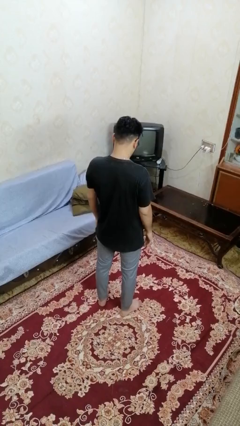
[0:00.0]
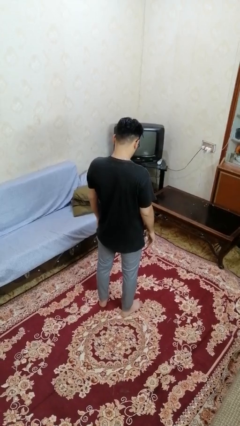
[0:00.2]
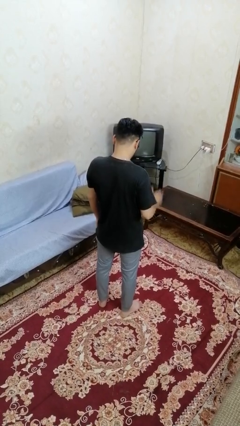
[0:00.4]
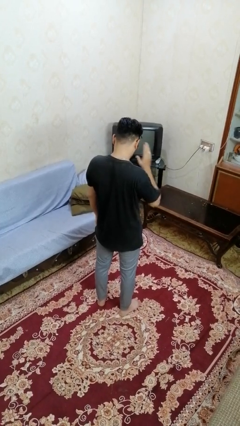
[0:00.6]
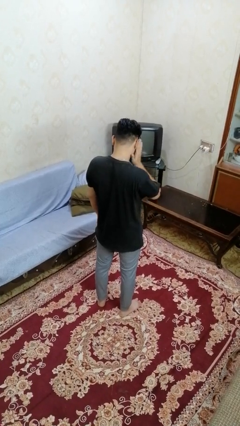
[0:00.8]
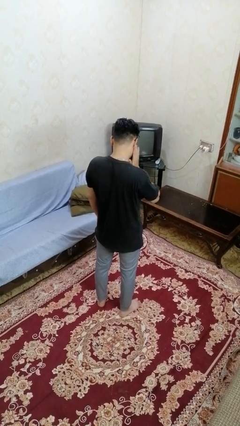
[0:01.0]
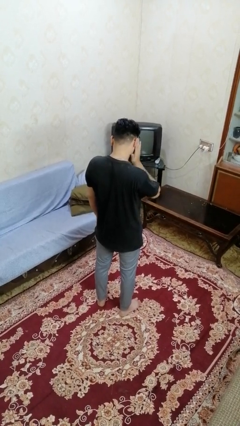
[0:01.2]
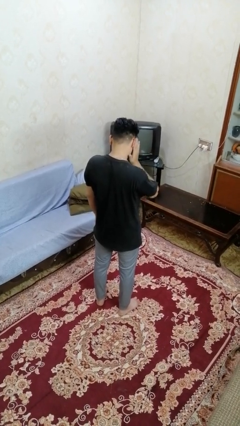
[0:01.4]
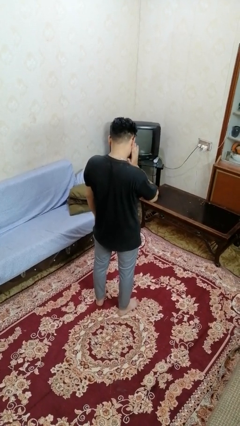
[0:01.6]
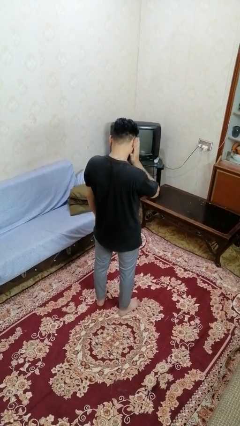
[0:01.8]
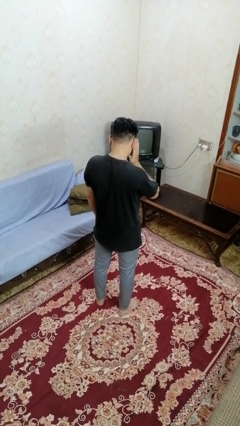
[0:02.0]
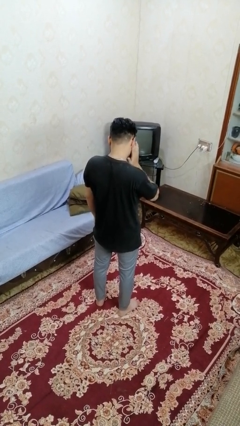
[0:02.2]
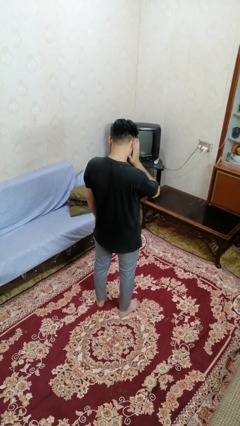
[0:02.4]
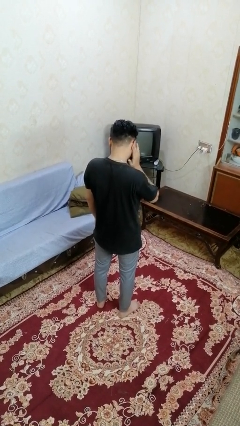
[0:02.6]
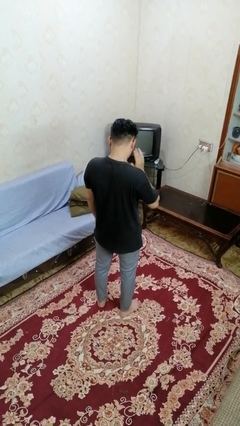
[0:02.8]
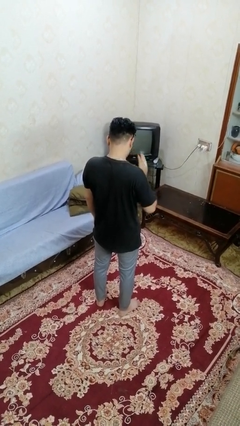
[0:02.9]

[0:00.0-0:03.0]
person touches earlobe

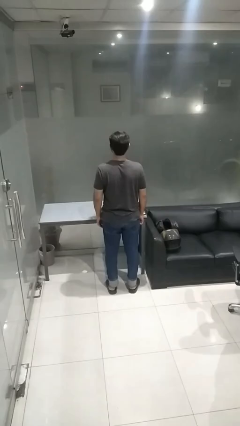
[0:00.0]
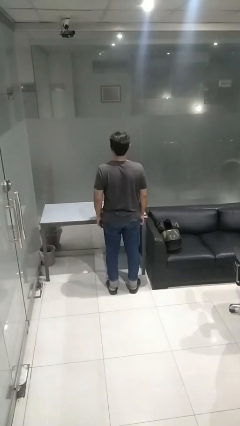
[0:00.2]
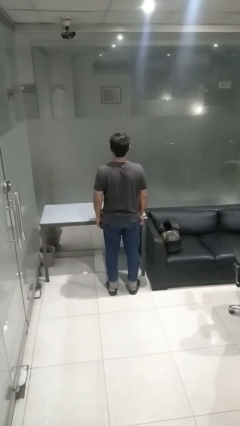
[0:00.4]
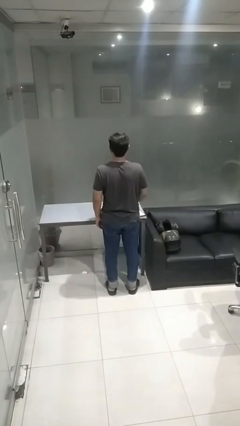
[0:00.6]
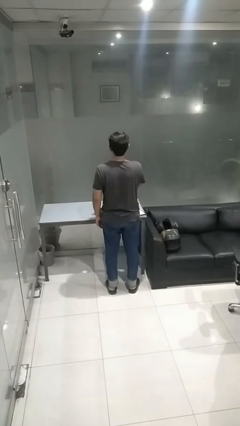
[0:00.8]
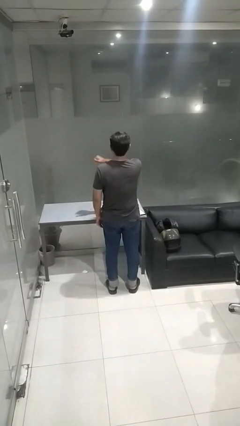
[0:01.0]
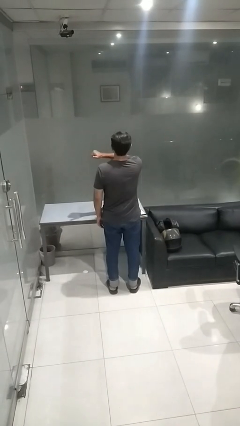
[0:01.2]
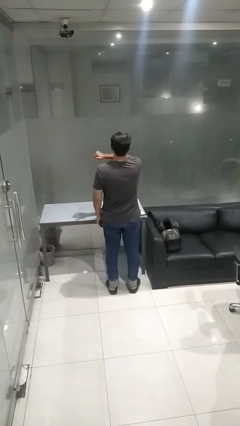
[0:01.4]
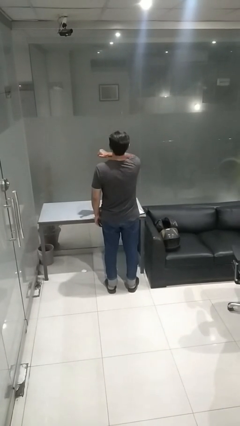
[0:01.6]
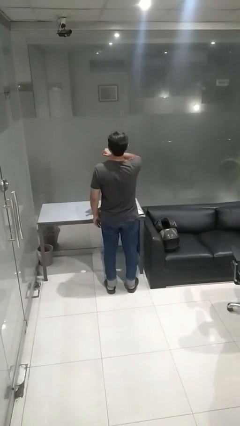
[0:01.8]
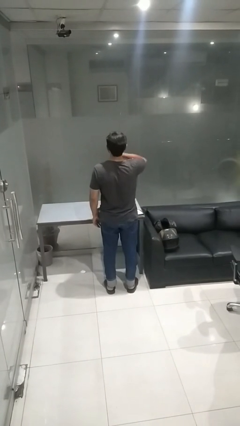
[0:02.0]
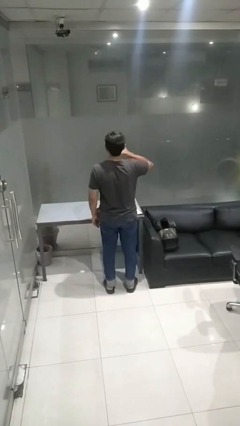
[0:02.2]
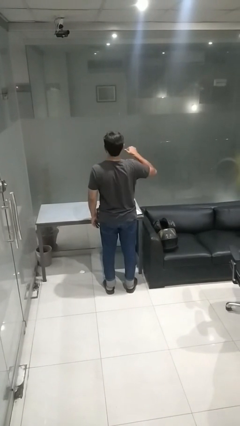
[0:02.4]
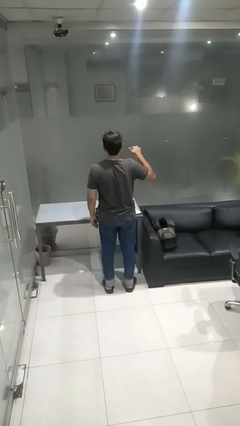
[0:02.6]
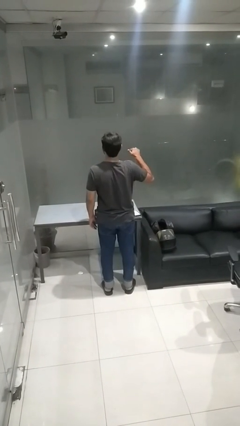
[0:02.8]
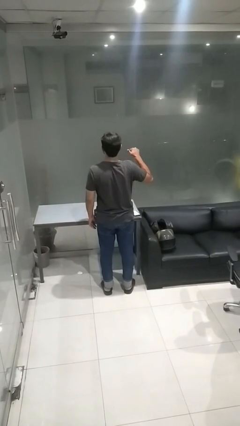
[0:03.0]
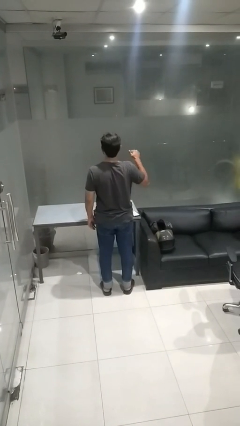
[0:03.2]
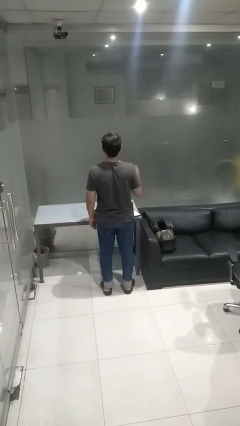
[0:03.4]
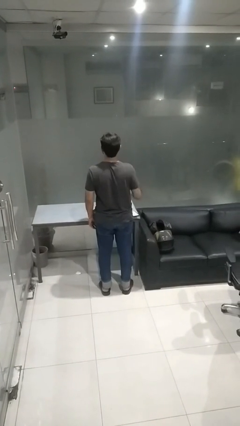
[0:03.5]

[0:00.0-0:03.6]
person gestures cut

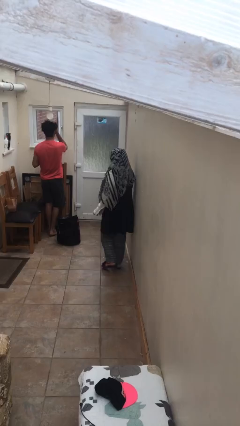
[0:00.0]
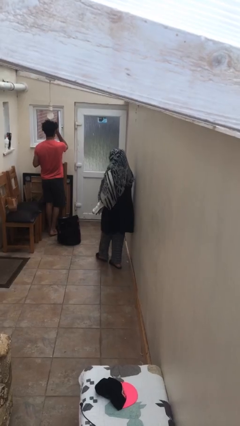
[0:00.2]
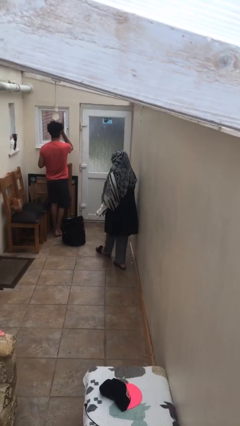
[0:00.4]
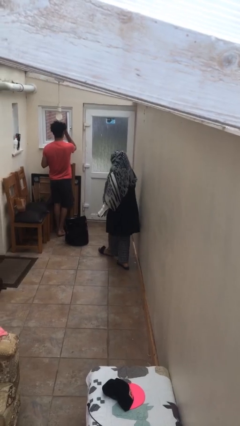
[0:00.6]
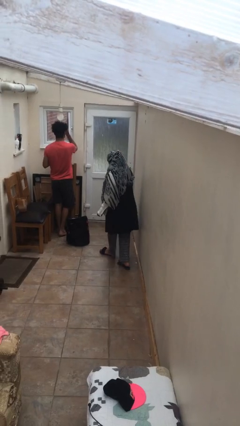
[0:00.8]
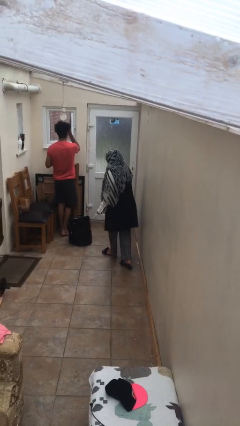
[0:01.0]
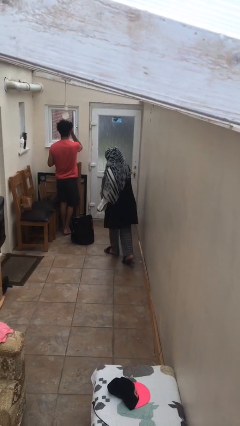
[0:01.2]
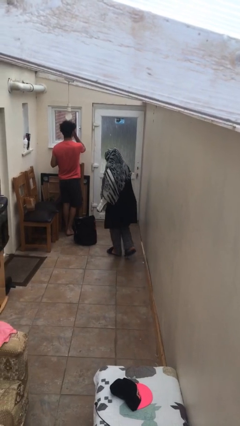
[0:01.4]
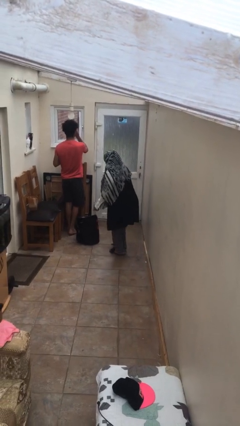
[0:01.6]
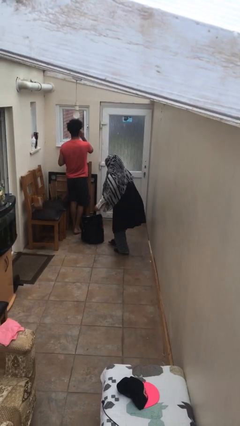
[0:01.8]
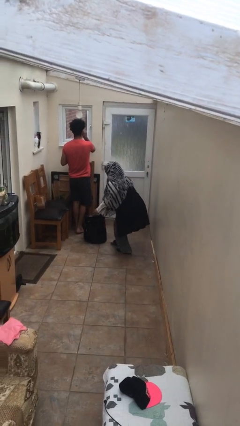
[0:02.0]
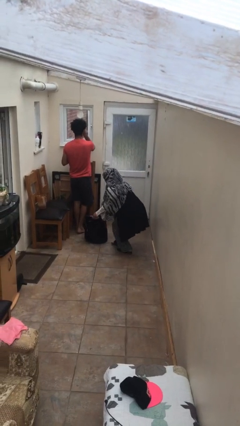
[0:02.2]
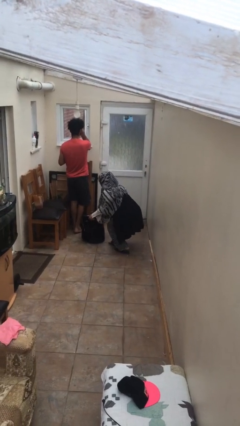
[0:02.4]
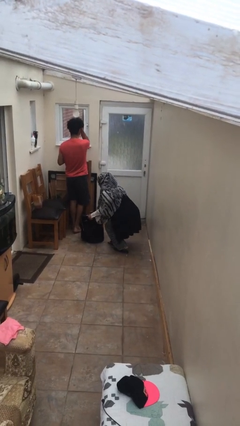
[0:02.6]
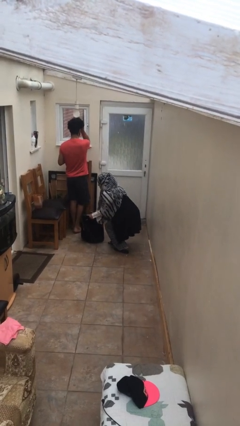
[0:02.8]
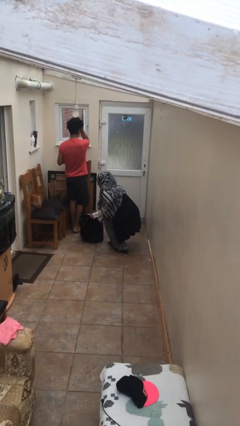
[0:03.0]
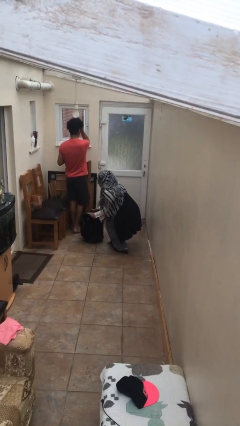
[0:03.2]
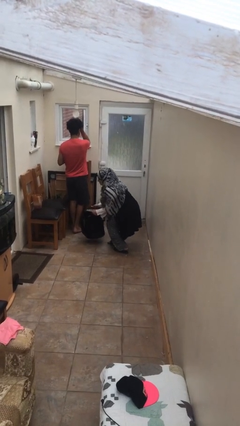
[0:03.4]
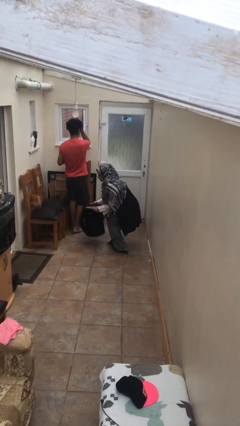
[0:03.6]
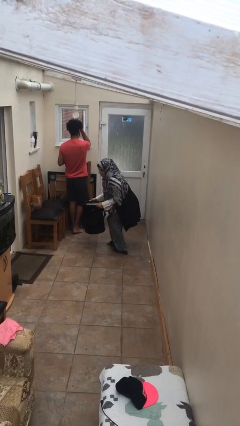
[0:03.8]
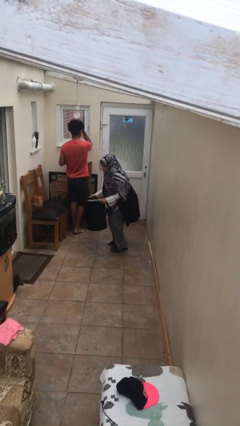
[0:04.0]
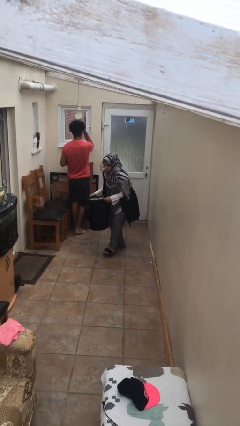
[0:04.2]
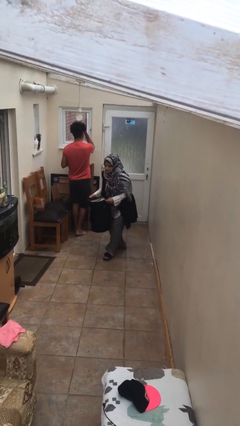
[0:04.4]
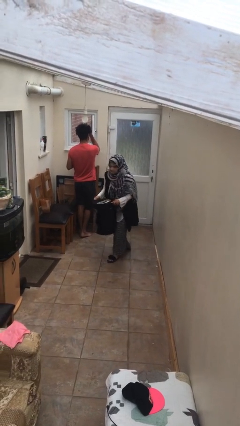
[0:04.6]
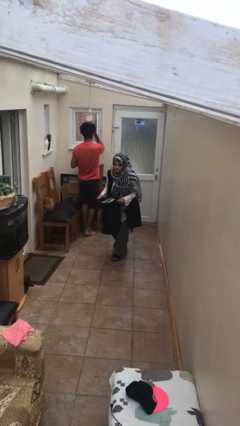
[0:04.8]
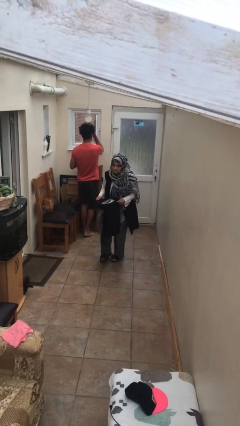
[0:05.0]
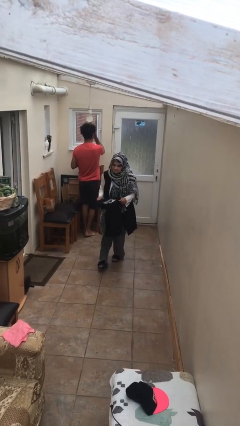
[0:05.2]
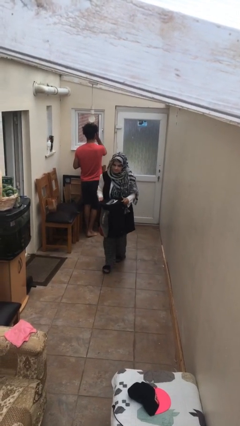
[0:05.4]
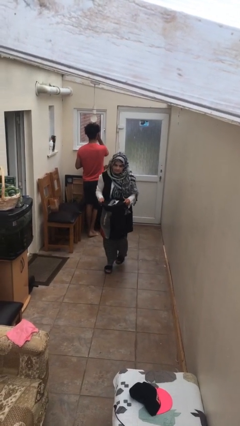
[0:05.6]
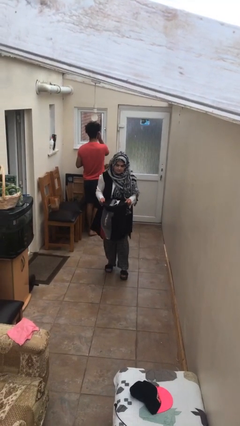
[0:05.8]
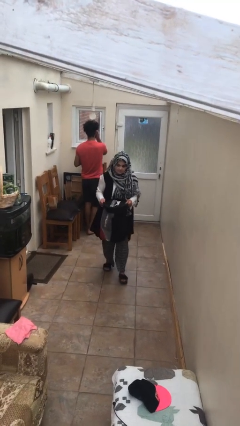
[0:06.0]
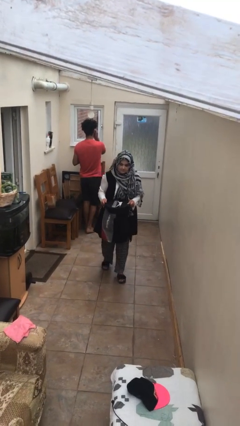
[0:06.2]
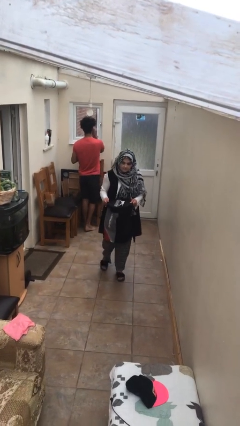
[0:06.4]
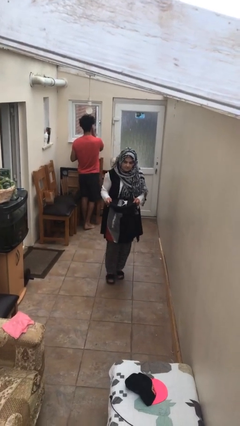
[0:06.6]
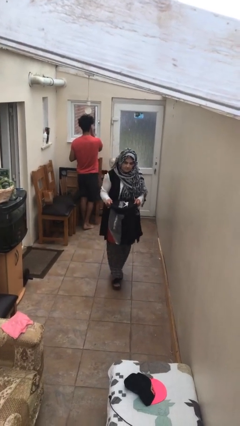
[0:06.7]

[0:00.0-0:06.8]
person steals object from person

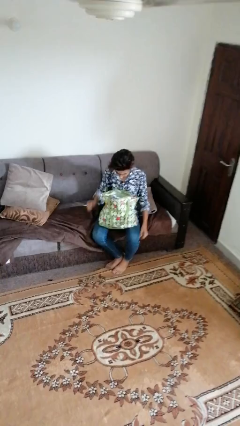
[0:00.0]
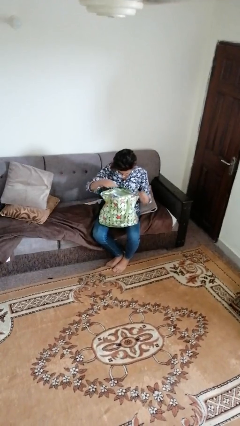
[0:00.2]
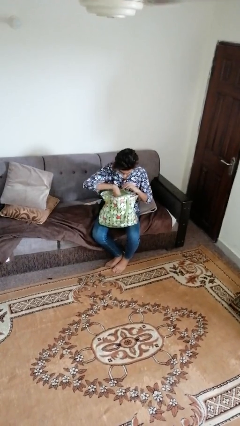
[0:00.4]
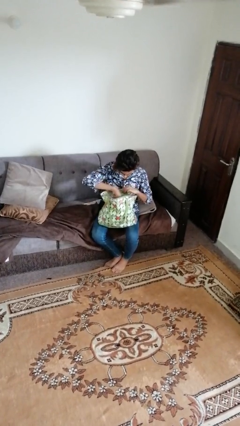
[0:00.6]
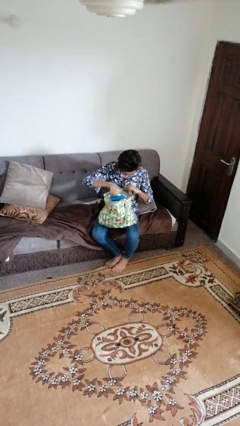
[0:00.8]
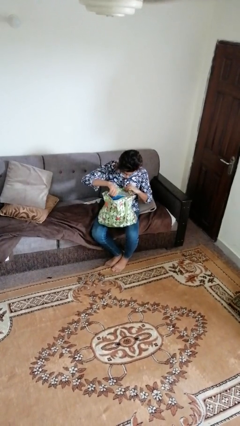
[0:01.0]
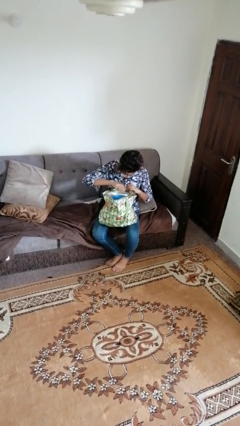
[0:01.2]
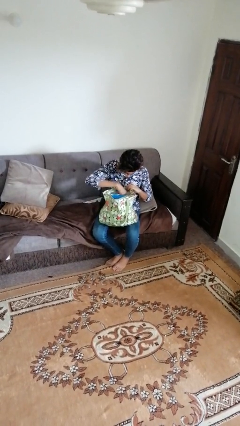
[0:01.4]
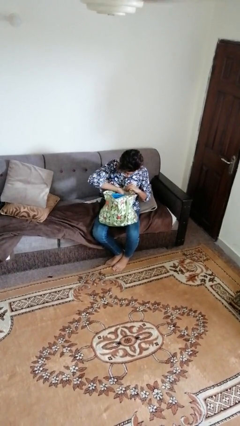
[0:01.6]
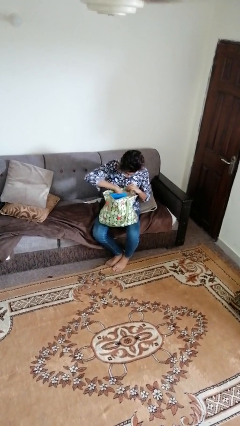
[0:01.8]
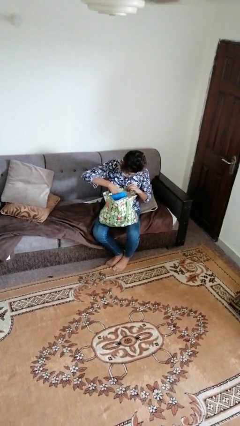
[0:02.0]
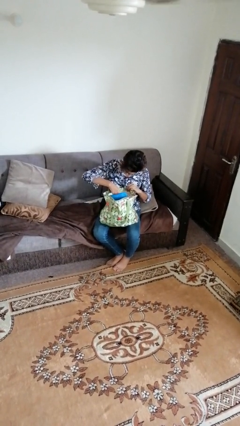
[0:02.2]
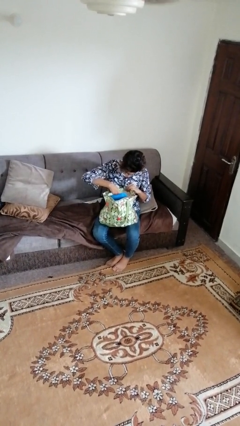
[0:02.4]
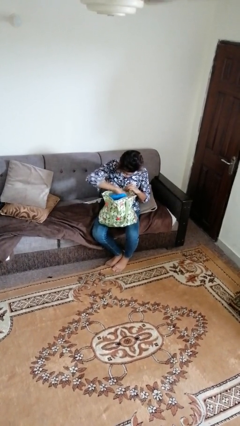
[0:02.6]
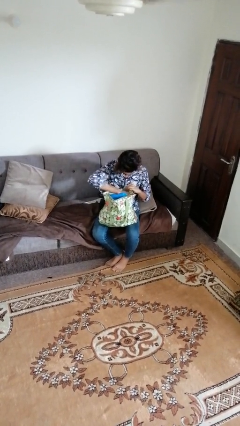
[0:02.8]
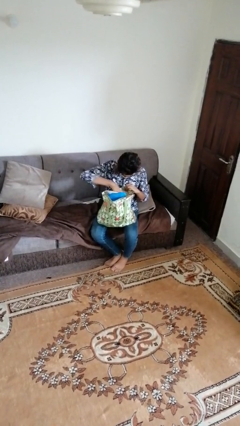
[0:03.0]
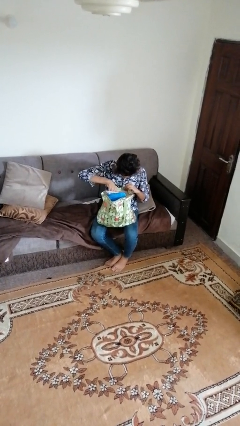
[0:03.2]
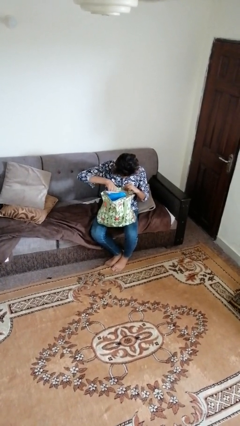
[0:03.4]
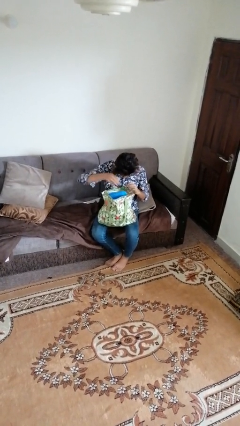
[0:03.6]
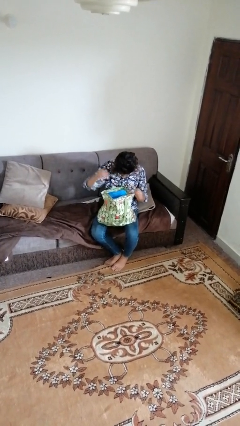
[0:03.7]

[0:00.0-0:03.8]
person searches in bag

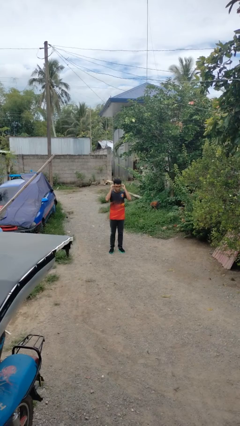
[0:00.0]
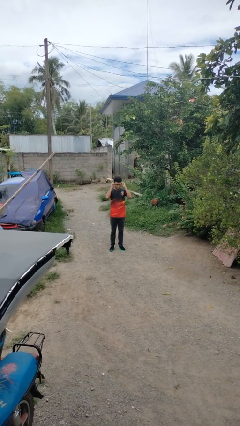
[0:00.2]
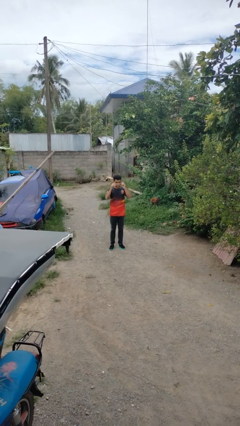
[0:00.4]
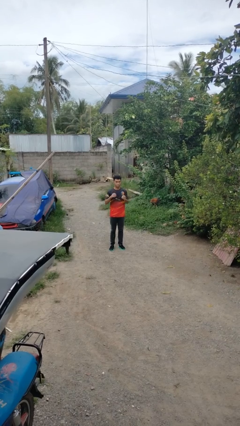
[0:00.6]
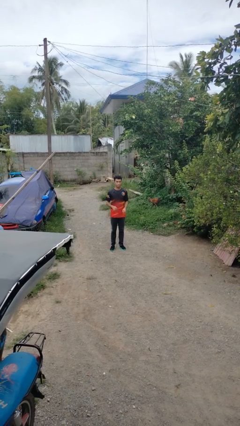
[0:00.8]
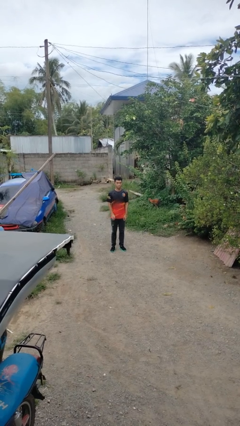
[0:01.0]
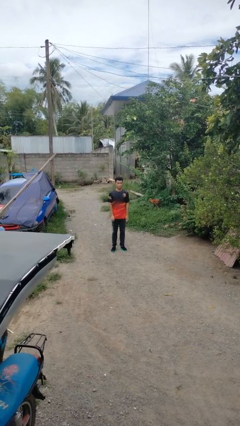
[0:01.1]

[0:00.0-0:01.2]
person takes off glasses
